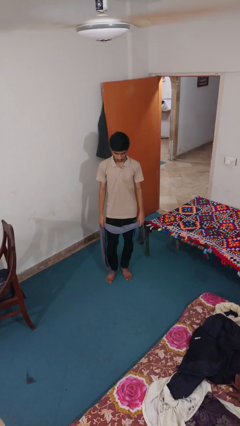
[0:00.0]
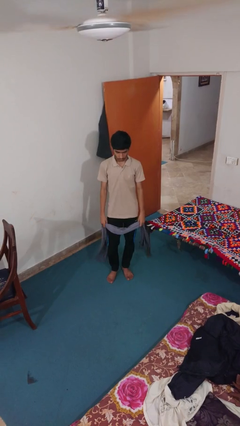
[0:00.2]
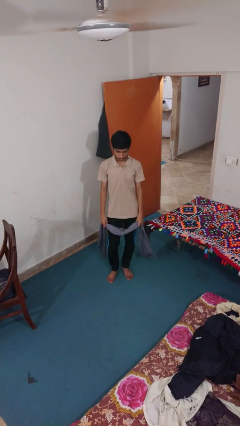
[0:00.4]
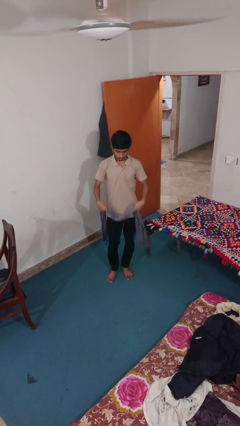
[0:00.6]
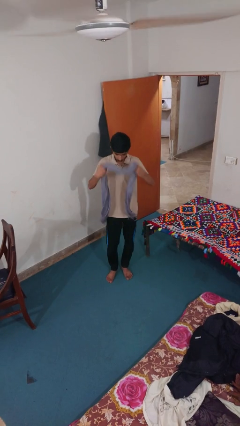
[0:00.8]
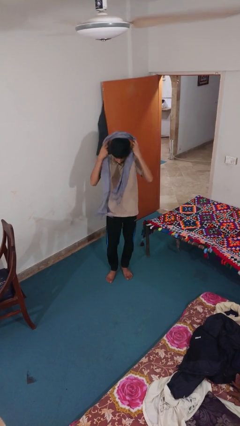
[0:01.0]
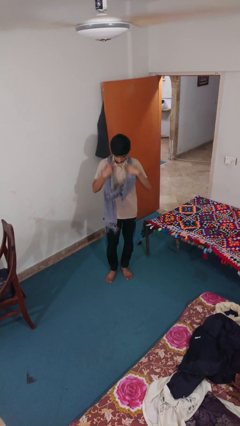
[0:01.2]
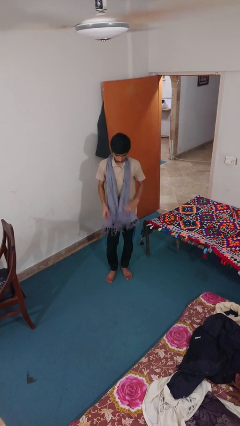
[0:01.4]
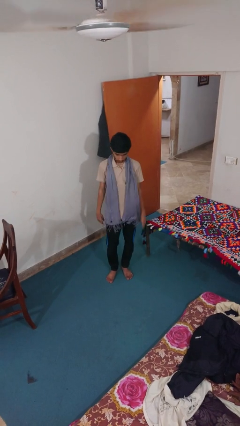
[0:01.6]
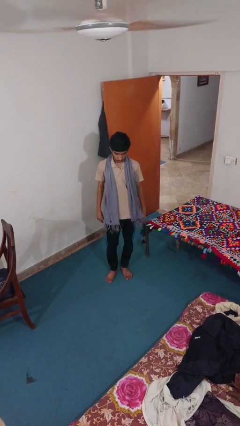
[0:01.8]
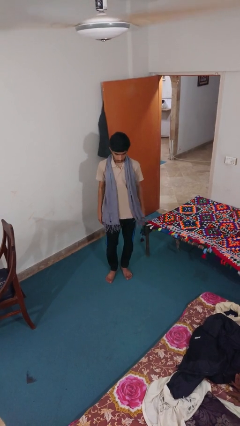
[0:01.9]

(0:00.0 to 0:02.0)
person puts on scarf

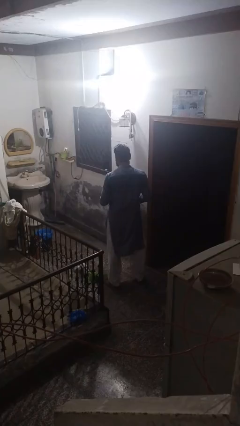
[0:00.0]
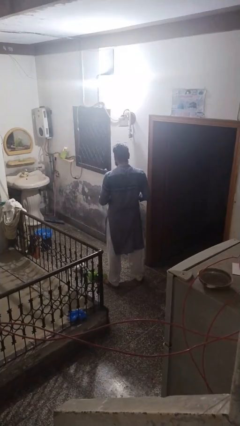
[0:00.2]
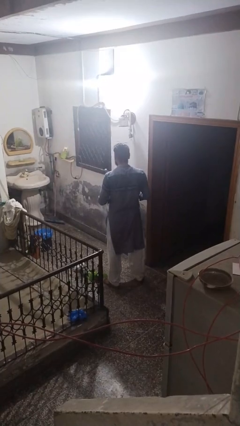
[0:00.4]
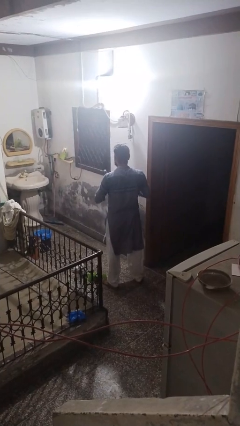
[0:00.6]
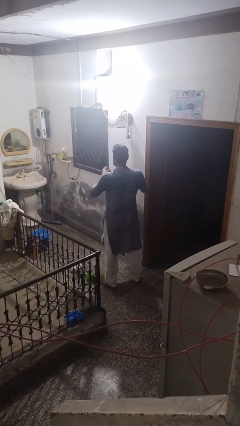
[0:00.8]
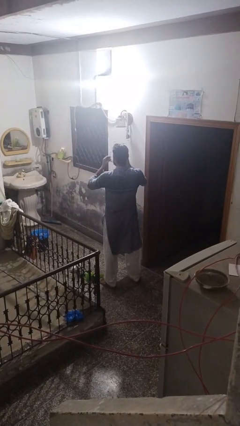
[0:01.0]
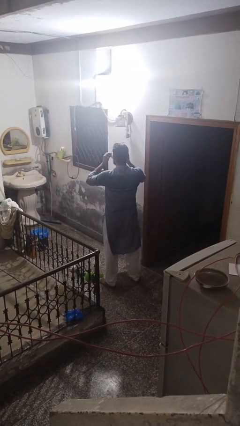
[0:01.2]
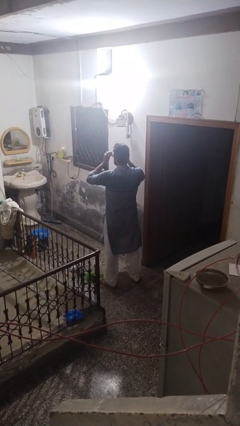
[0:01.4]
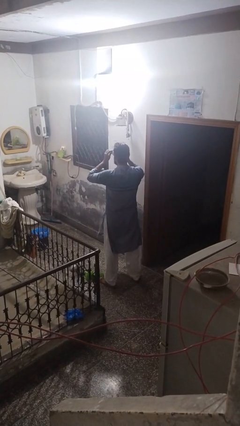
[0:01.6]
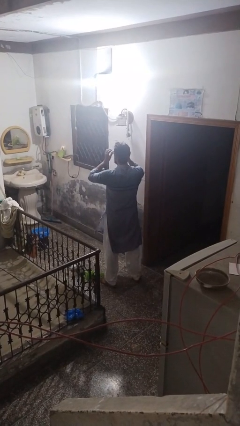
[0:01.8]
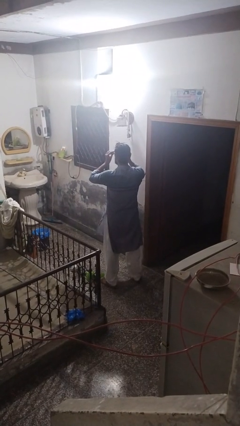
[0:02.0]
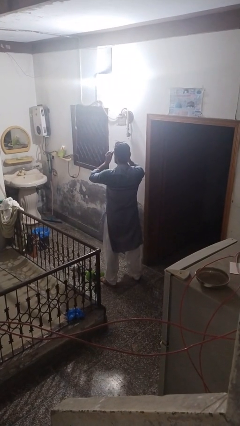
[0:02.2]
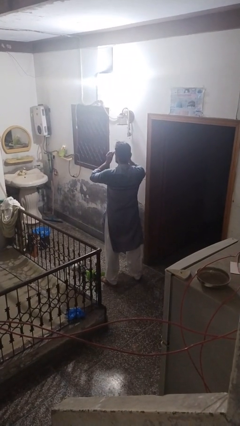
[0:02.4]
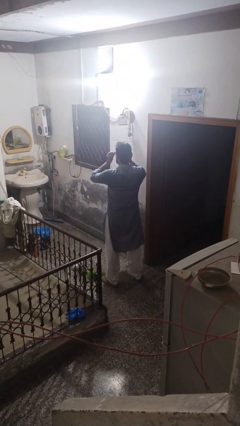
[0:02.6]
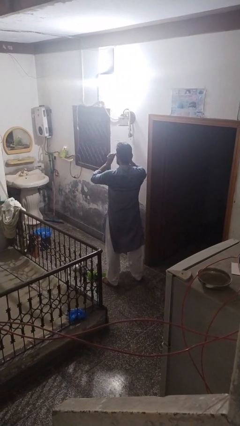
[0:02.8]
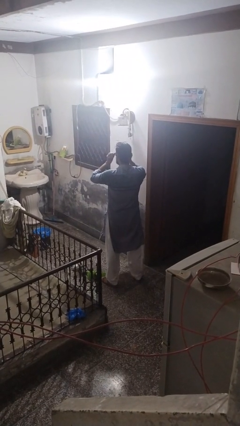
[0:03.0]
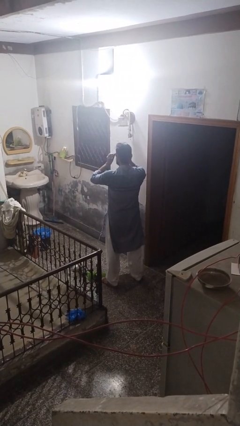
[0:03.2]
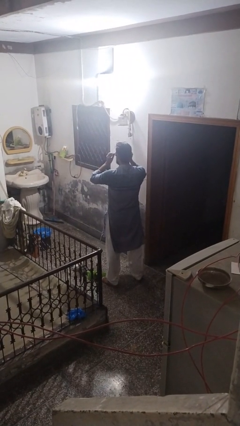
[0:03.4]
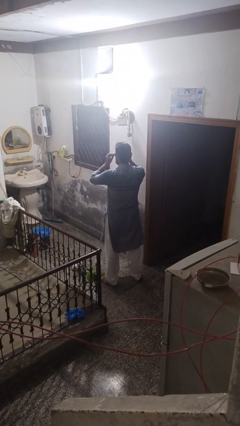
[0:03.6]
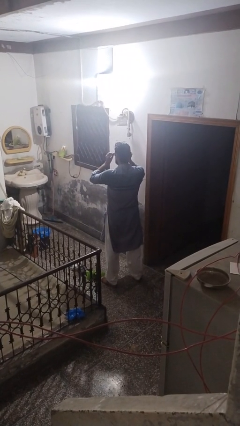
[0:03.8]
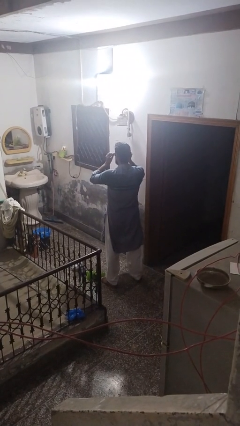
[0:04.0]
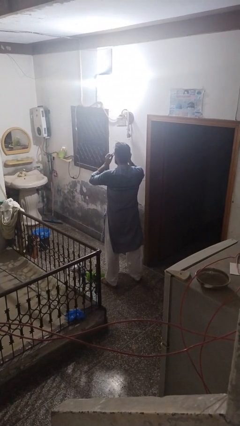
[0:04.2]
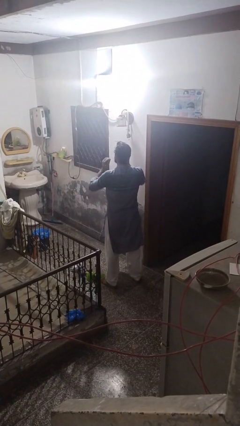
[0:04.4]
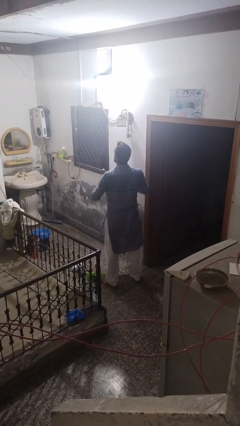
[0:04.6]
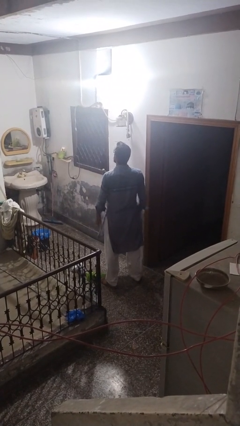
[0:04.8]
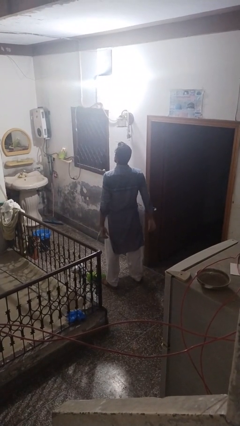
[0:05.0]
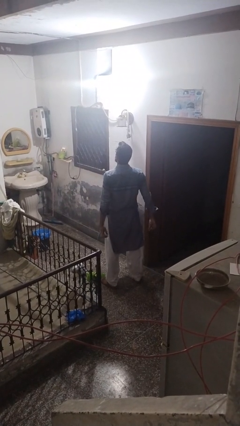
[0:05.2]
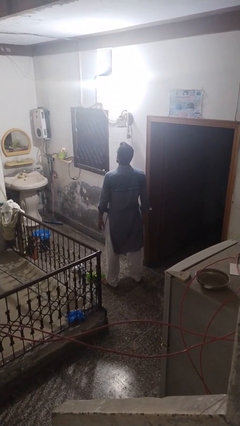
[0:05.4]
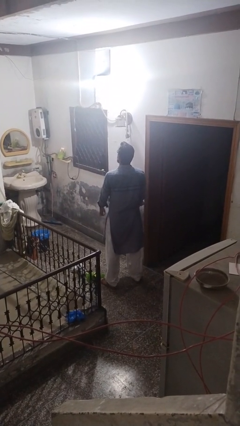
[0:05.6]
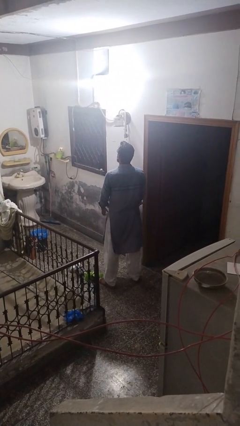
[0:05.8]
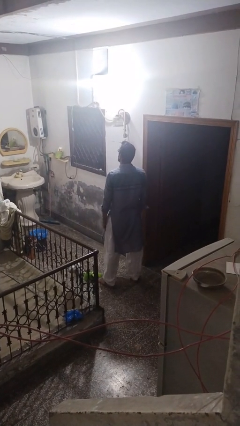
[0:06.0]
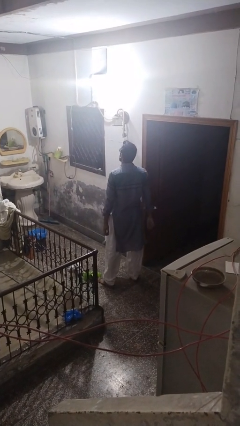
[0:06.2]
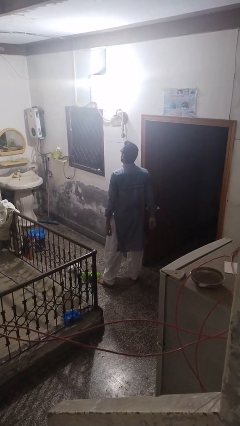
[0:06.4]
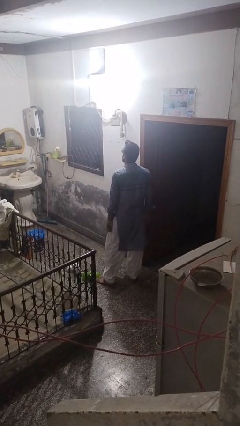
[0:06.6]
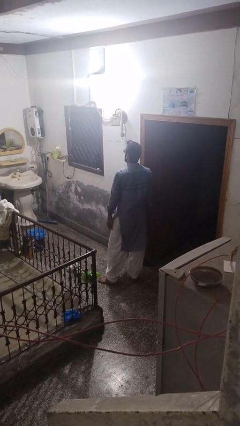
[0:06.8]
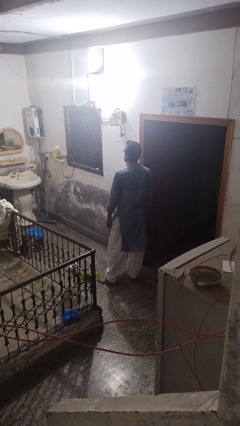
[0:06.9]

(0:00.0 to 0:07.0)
person puts on sunglasses

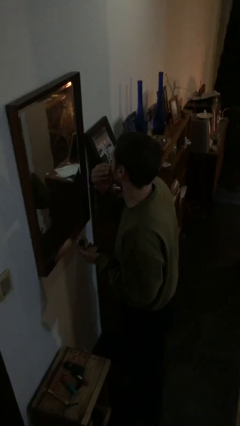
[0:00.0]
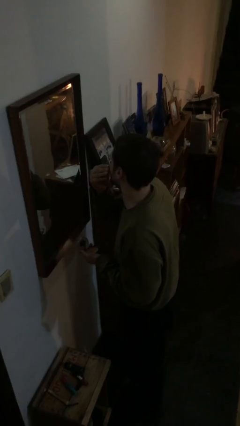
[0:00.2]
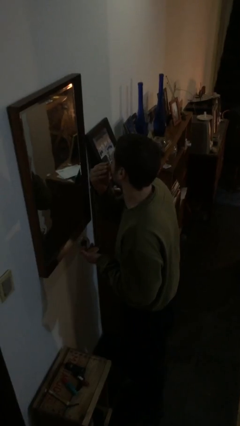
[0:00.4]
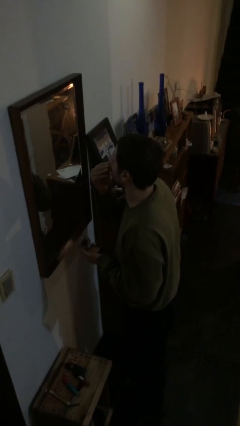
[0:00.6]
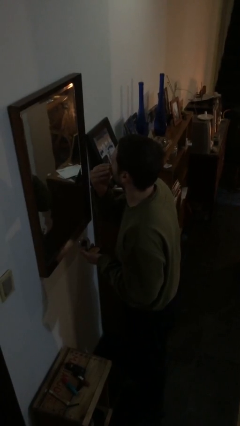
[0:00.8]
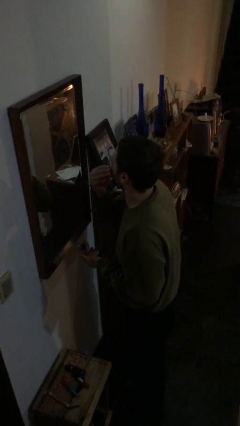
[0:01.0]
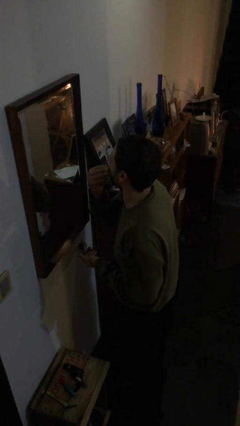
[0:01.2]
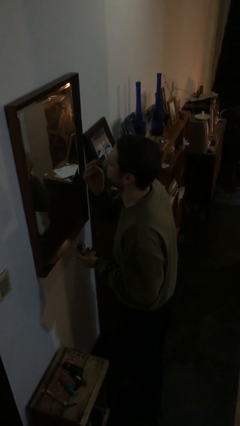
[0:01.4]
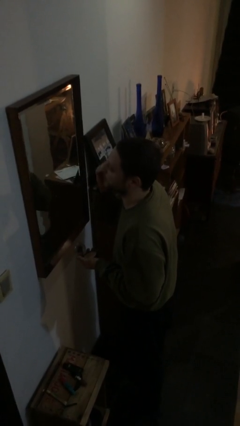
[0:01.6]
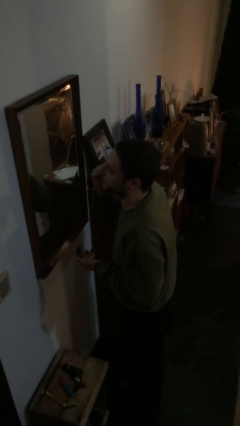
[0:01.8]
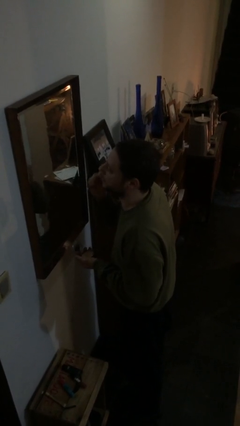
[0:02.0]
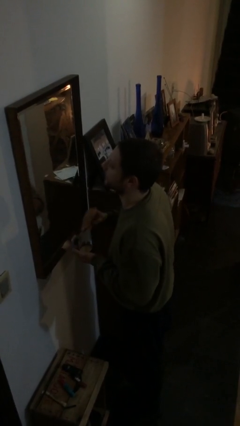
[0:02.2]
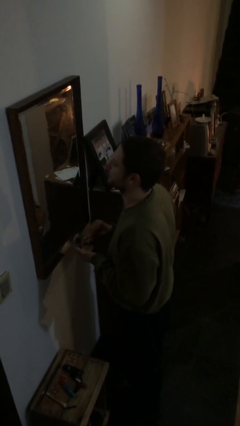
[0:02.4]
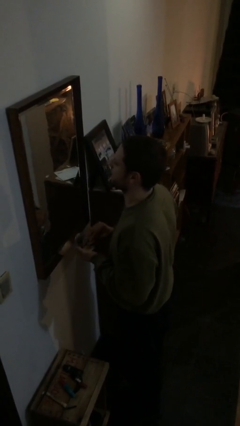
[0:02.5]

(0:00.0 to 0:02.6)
person applies foundation makeup

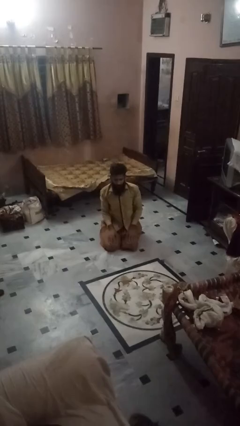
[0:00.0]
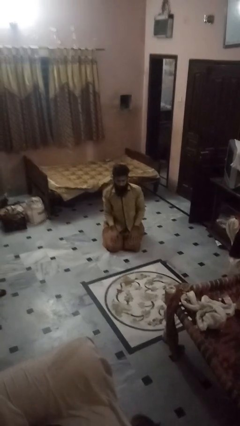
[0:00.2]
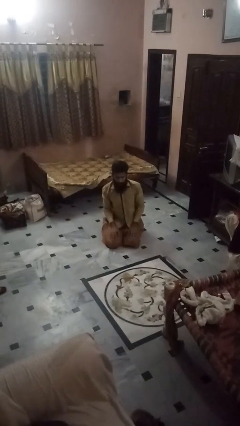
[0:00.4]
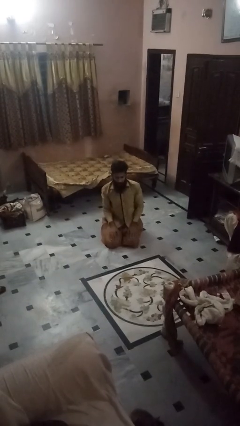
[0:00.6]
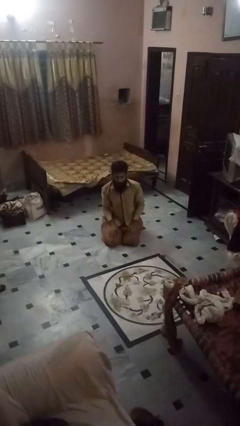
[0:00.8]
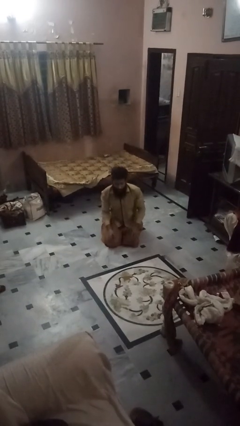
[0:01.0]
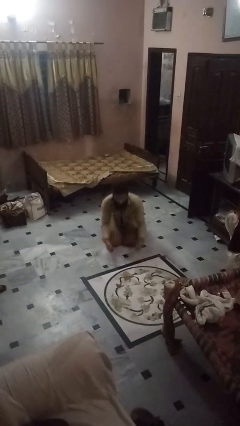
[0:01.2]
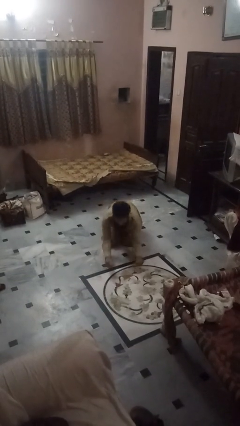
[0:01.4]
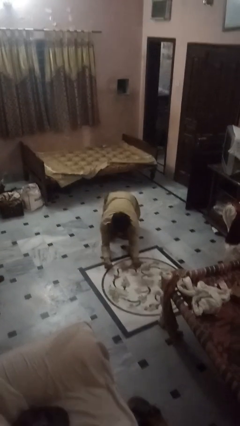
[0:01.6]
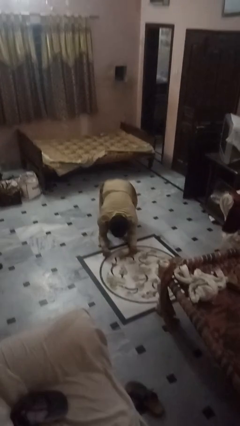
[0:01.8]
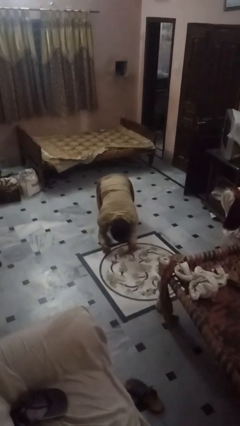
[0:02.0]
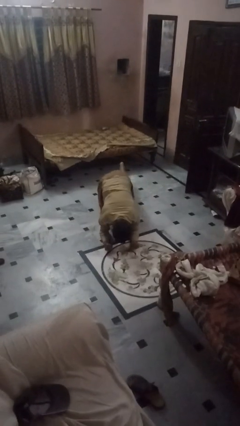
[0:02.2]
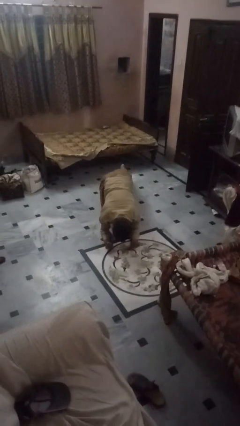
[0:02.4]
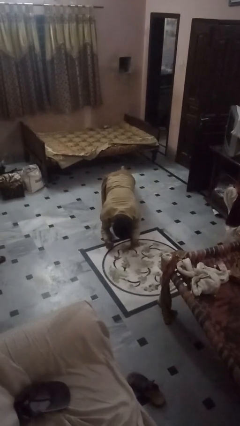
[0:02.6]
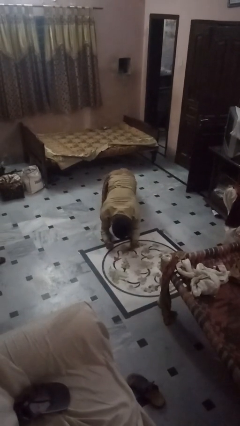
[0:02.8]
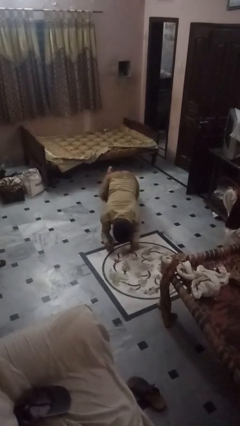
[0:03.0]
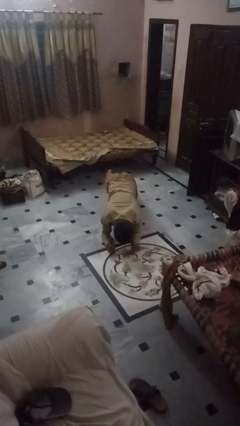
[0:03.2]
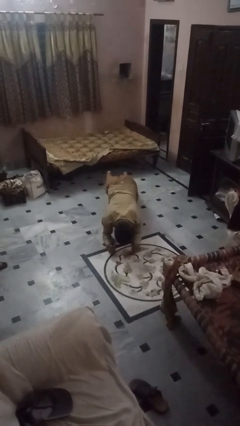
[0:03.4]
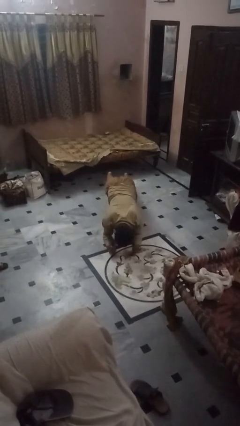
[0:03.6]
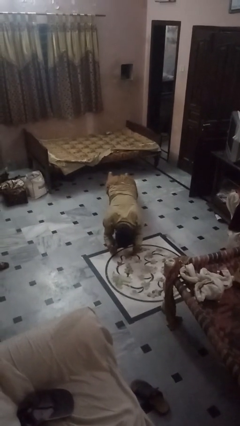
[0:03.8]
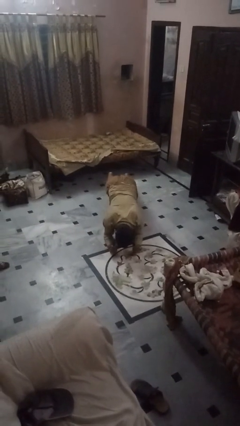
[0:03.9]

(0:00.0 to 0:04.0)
person exercises with plank

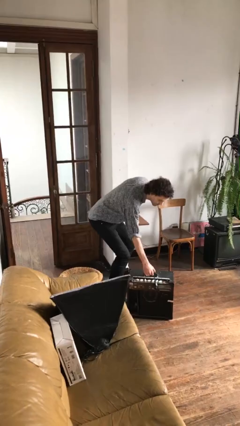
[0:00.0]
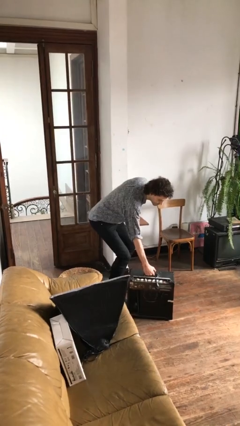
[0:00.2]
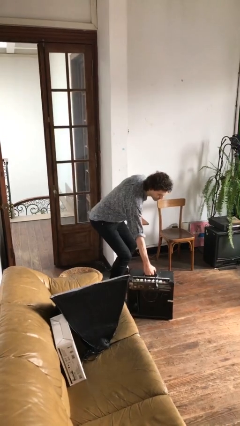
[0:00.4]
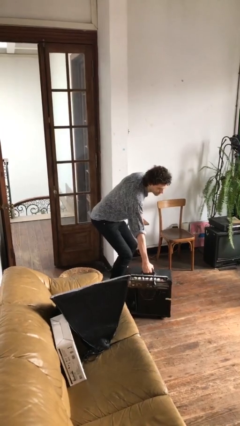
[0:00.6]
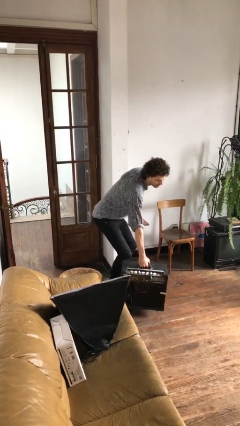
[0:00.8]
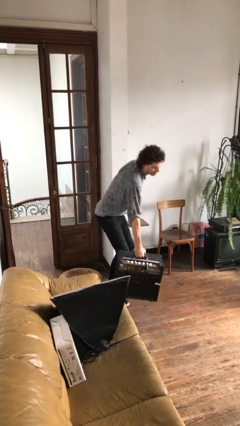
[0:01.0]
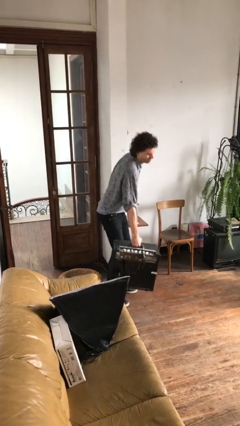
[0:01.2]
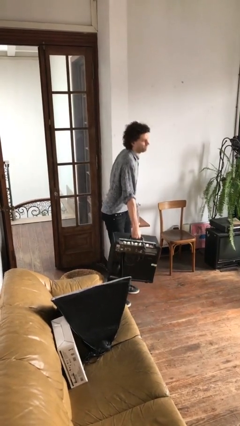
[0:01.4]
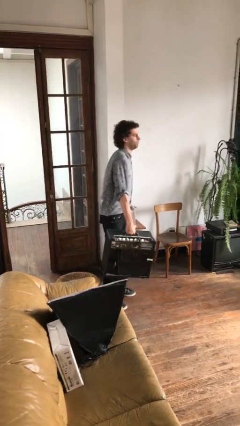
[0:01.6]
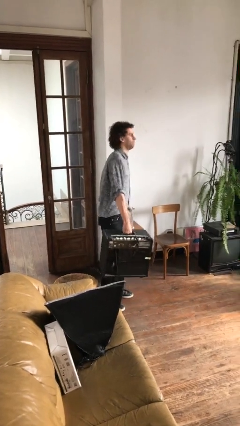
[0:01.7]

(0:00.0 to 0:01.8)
person picks up object from floor

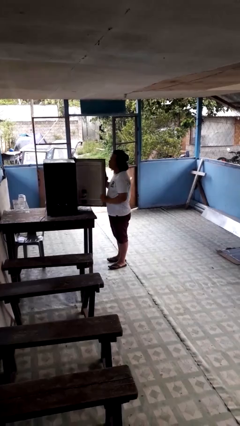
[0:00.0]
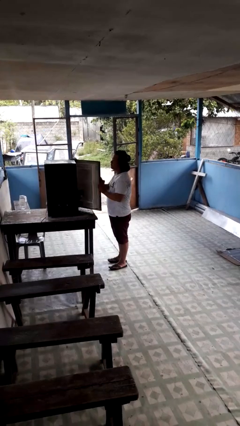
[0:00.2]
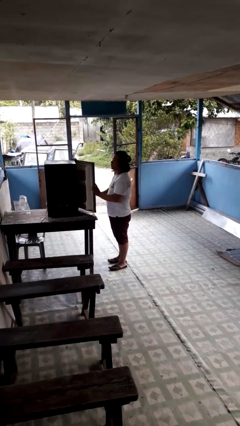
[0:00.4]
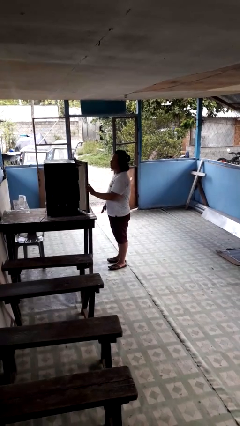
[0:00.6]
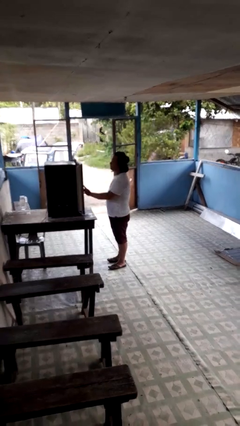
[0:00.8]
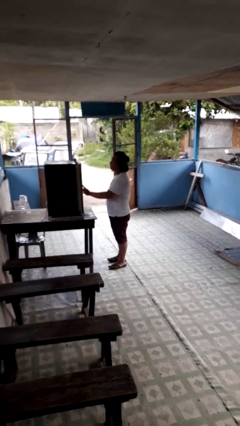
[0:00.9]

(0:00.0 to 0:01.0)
person closes refrigerator
